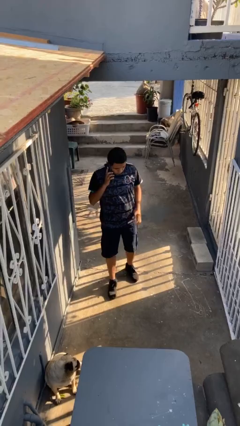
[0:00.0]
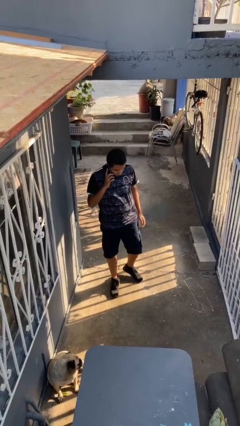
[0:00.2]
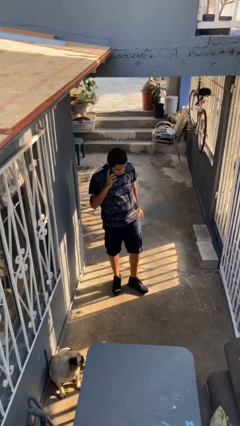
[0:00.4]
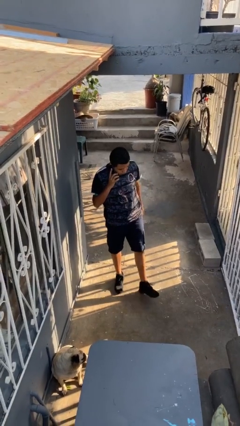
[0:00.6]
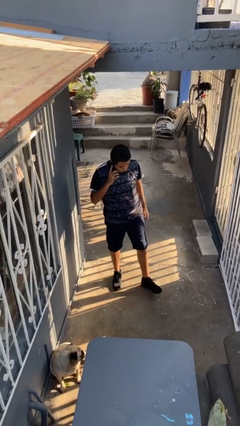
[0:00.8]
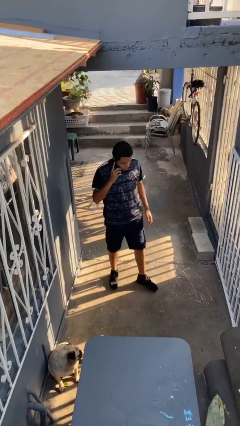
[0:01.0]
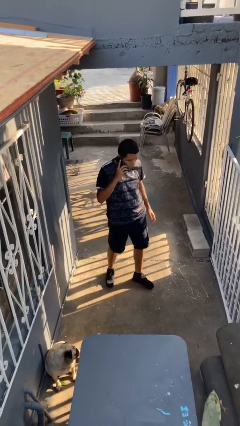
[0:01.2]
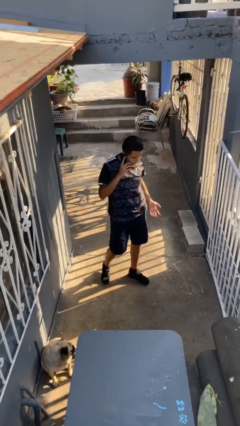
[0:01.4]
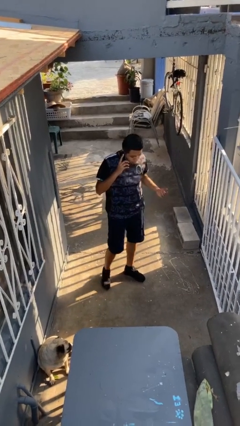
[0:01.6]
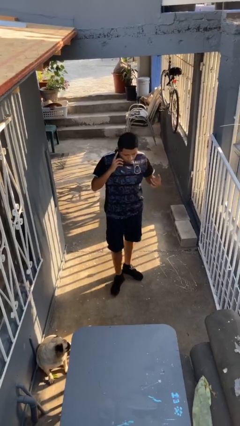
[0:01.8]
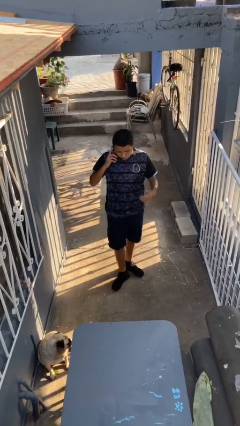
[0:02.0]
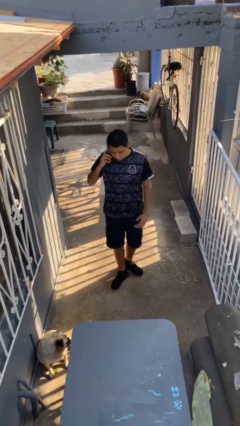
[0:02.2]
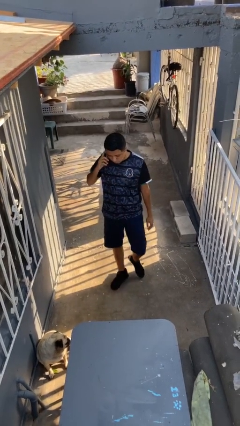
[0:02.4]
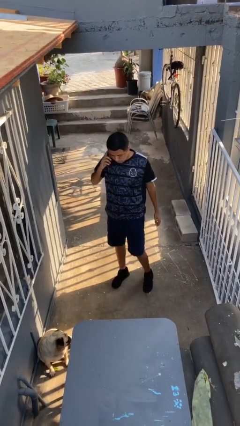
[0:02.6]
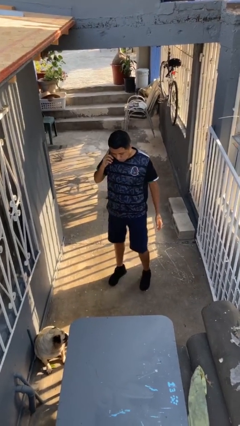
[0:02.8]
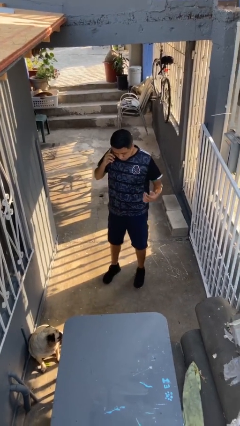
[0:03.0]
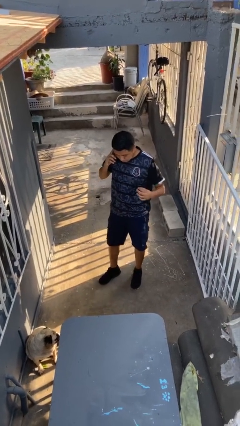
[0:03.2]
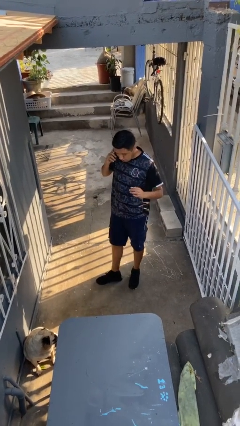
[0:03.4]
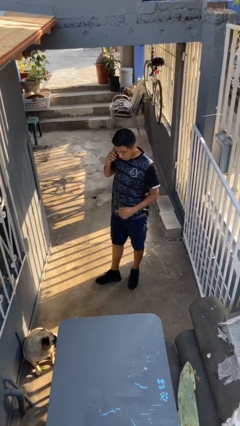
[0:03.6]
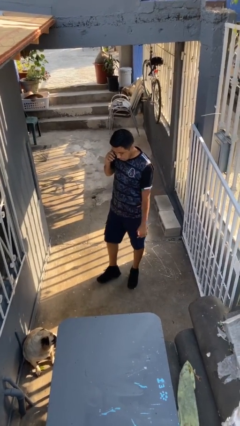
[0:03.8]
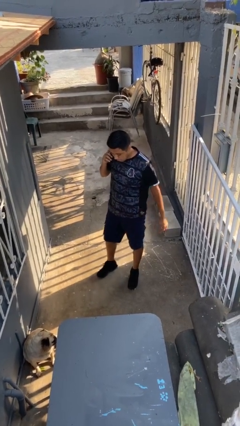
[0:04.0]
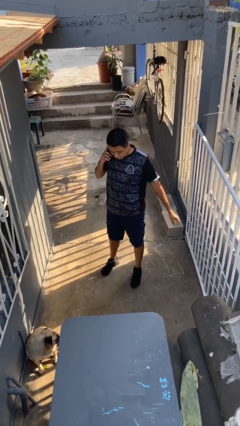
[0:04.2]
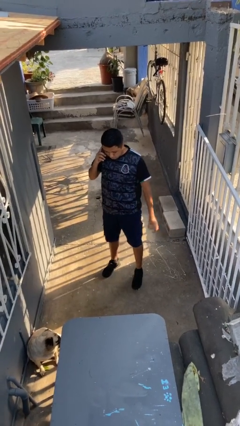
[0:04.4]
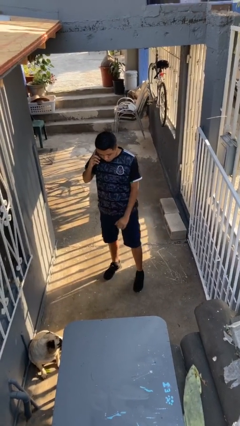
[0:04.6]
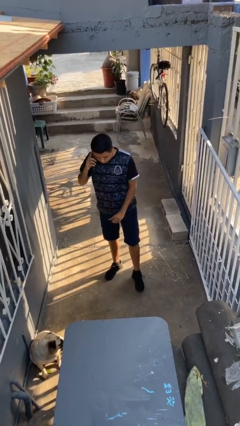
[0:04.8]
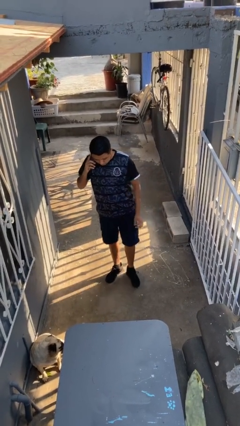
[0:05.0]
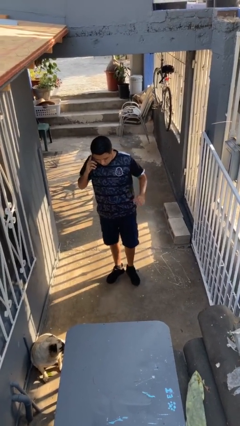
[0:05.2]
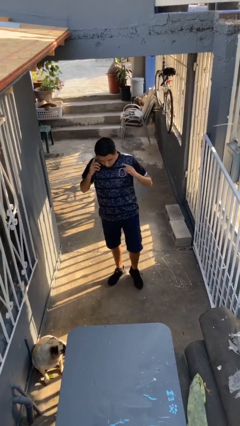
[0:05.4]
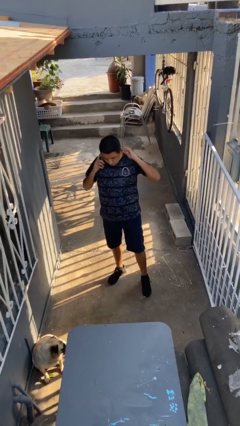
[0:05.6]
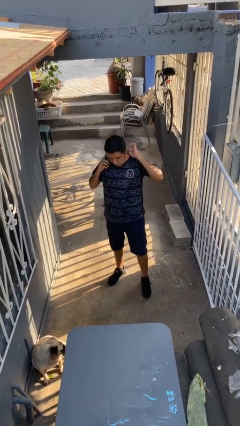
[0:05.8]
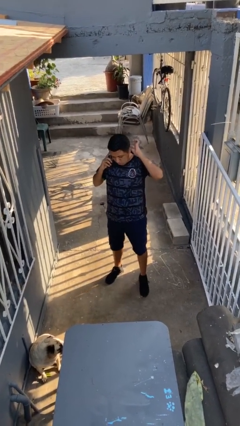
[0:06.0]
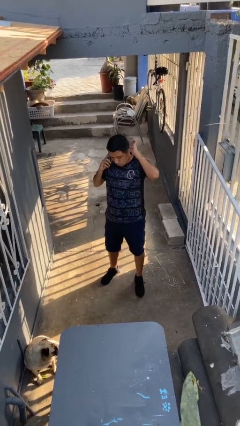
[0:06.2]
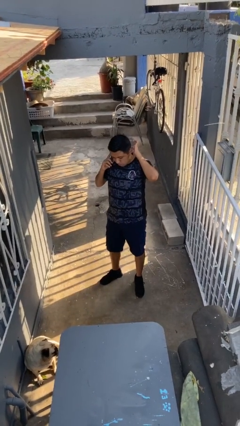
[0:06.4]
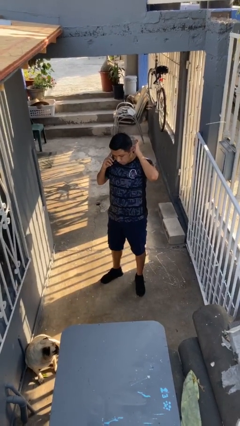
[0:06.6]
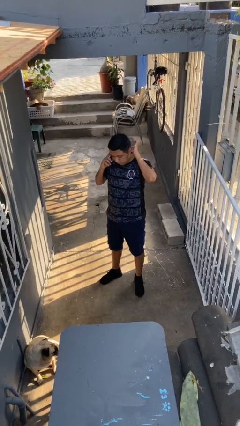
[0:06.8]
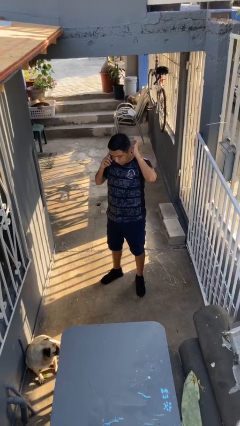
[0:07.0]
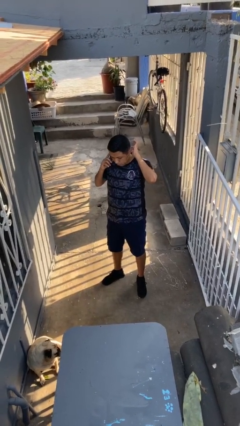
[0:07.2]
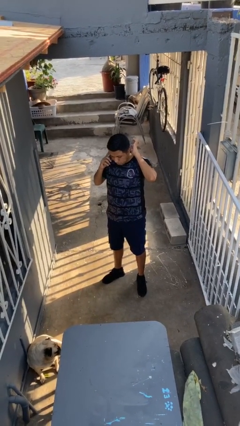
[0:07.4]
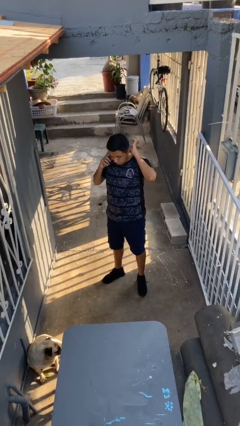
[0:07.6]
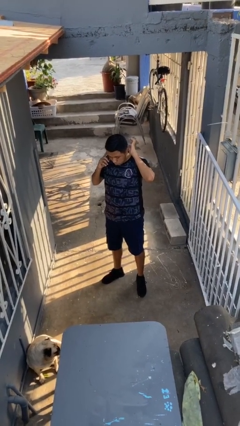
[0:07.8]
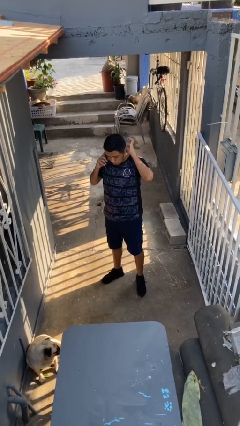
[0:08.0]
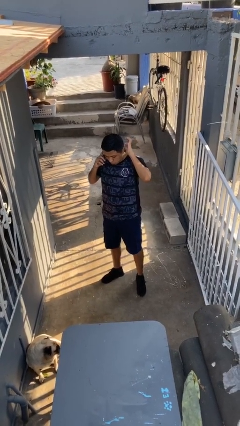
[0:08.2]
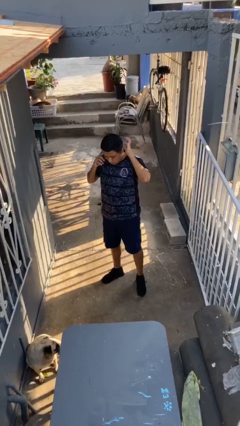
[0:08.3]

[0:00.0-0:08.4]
person talks on phone

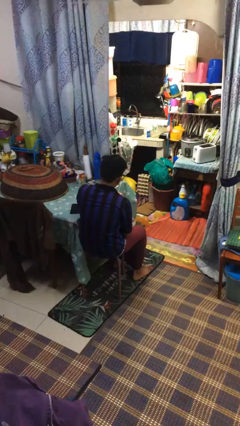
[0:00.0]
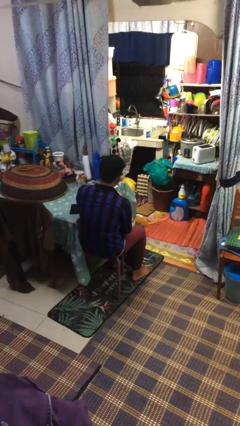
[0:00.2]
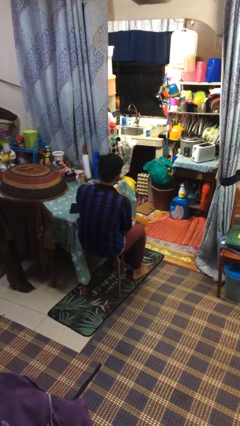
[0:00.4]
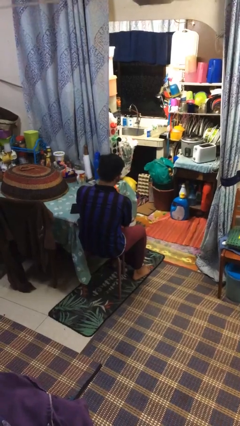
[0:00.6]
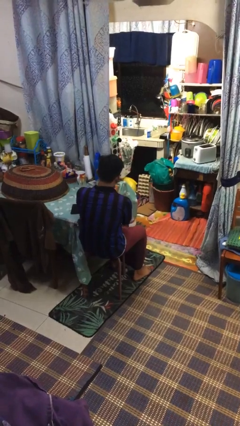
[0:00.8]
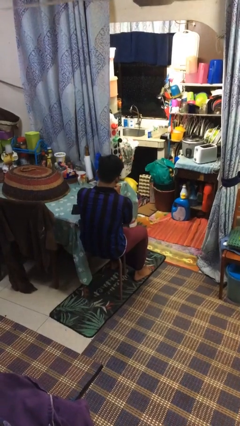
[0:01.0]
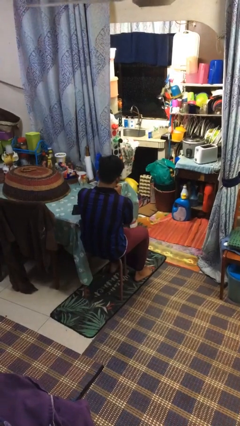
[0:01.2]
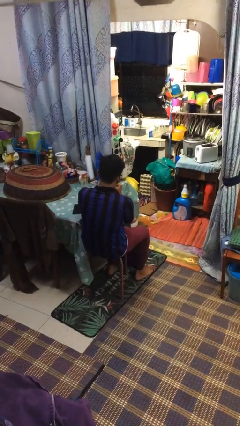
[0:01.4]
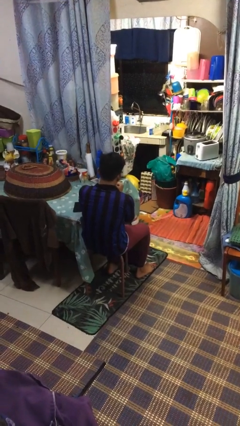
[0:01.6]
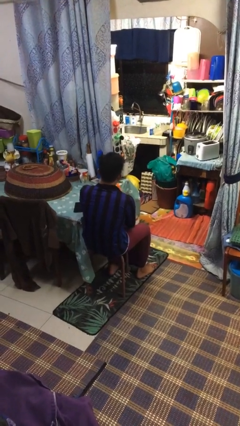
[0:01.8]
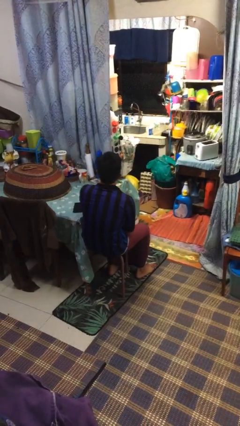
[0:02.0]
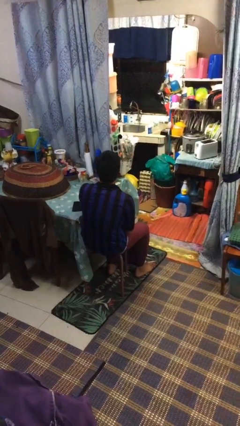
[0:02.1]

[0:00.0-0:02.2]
person vapes

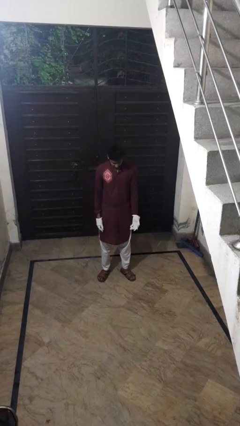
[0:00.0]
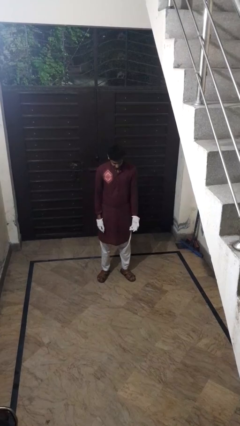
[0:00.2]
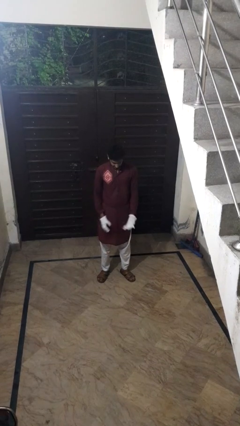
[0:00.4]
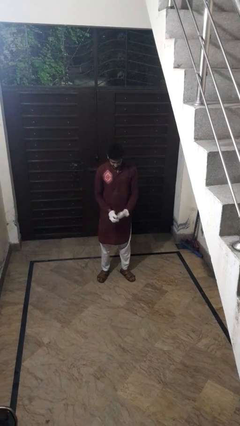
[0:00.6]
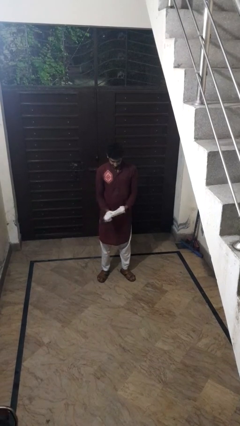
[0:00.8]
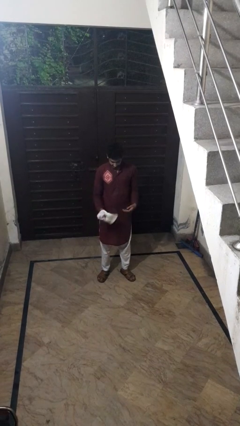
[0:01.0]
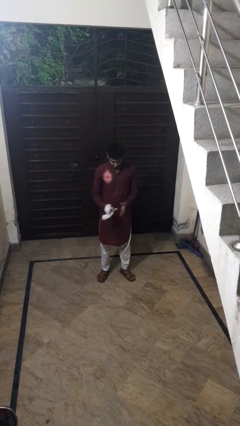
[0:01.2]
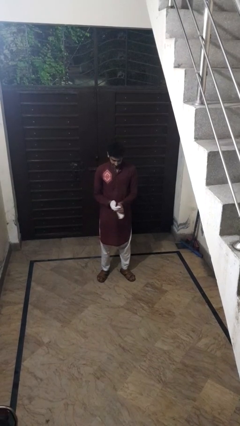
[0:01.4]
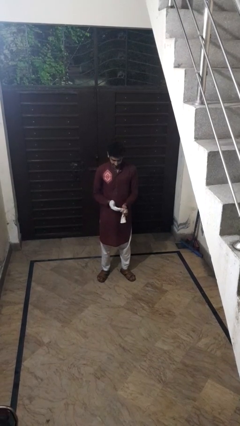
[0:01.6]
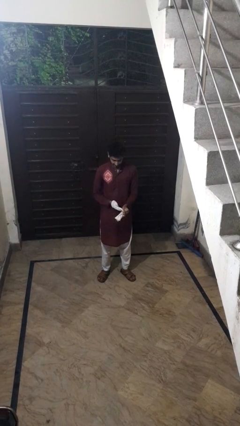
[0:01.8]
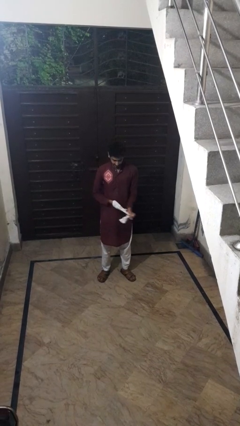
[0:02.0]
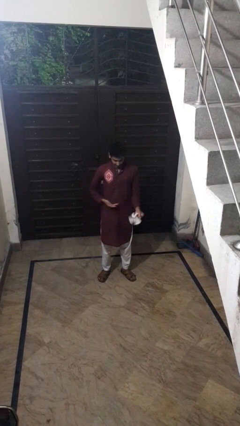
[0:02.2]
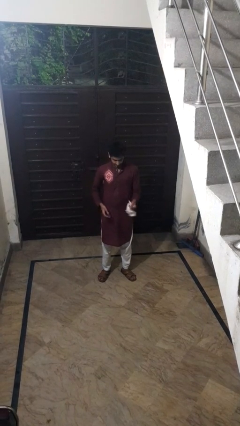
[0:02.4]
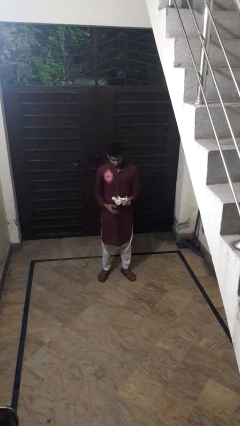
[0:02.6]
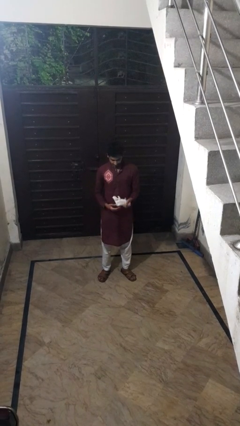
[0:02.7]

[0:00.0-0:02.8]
person takes off gloves

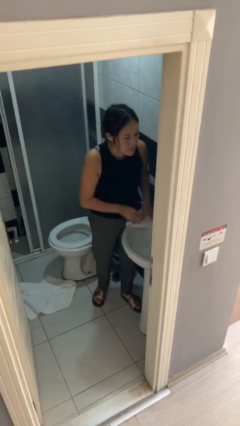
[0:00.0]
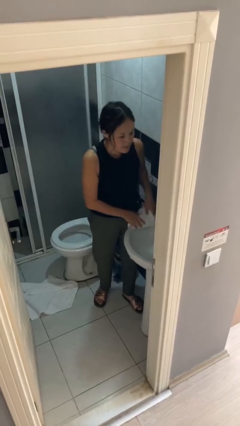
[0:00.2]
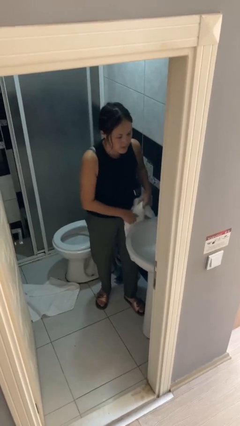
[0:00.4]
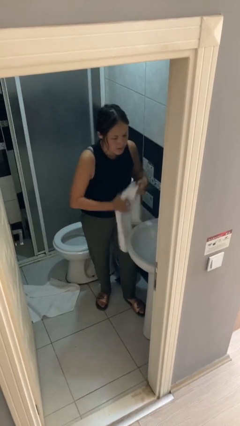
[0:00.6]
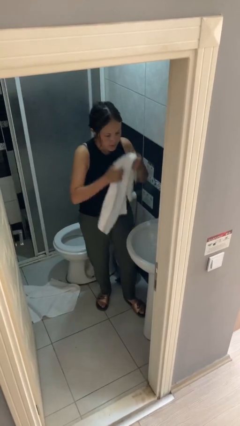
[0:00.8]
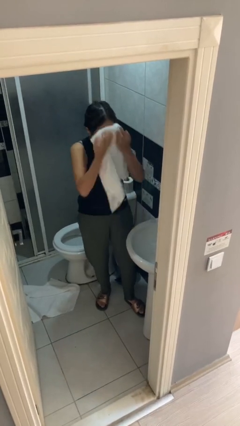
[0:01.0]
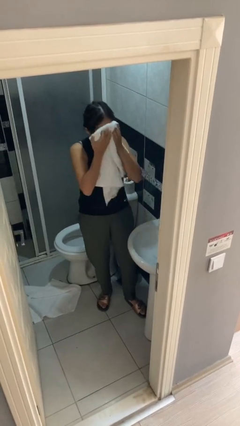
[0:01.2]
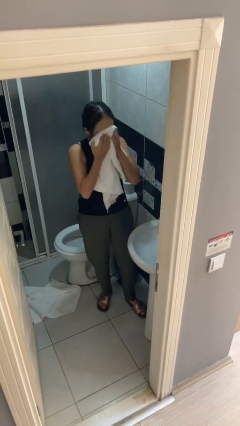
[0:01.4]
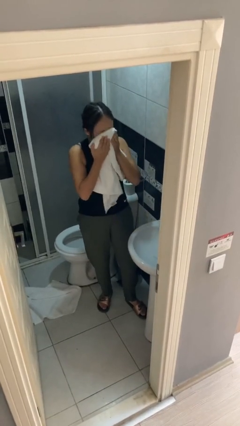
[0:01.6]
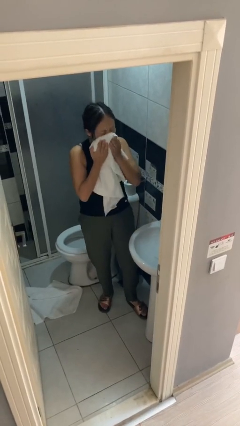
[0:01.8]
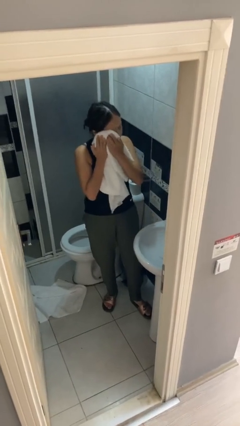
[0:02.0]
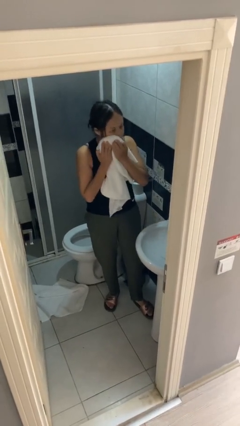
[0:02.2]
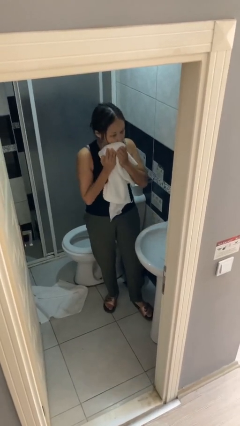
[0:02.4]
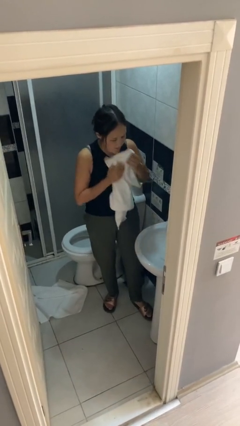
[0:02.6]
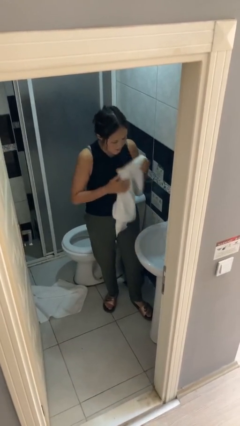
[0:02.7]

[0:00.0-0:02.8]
person dries face with towel

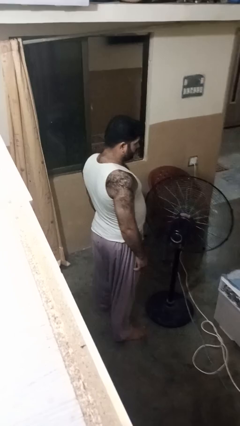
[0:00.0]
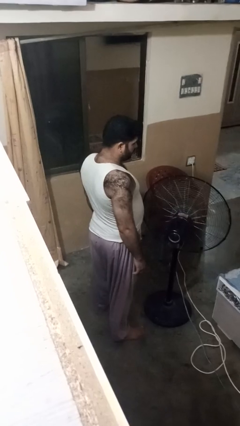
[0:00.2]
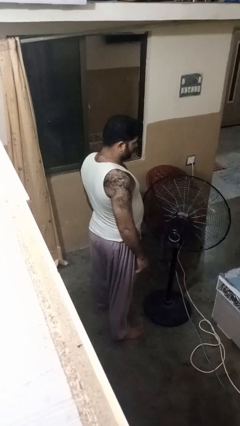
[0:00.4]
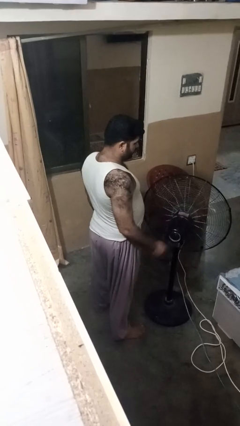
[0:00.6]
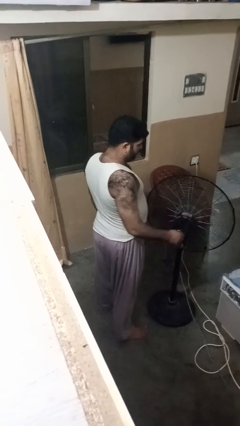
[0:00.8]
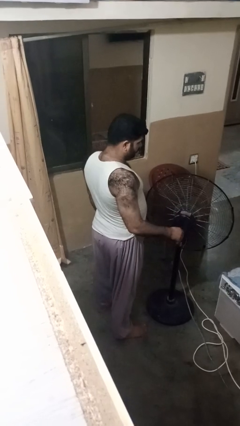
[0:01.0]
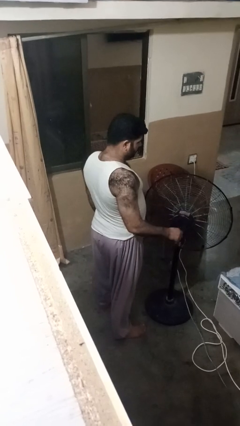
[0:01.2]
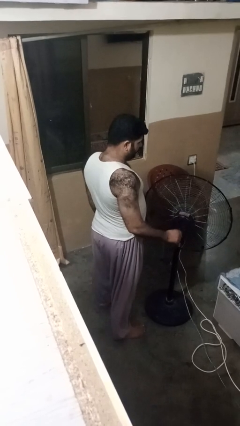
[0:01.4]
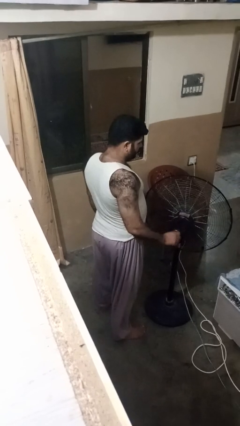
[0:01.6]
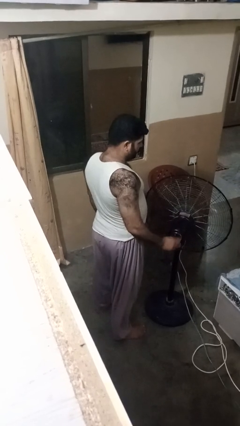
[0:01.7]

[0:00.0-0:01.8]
person turns off fan
